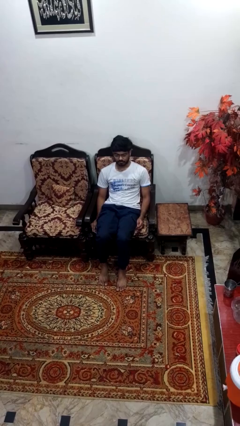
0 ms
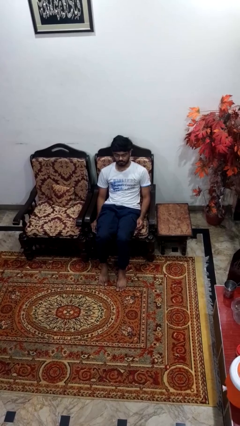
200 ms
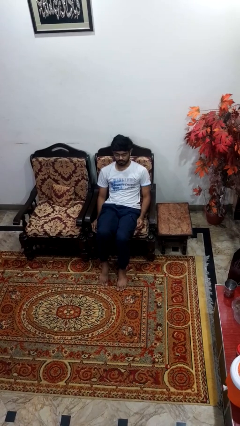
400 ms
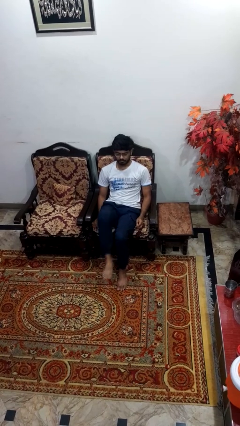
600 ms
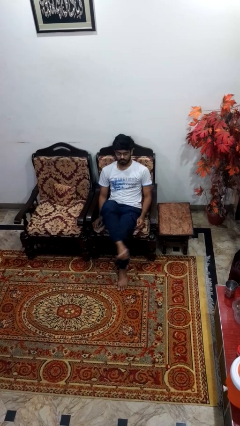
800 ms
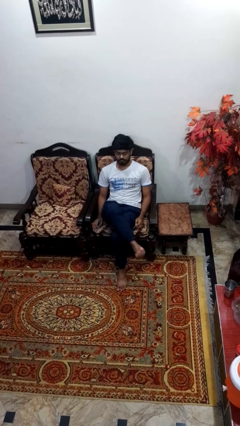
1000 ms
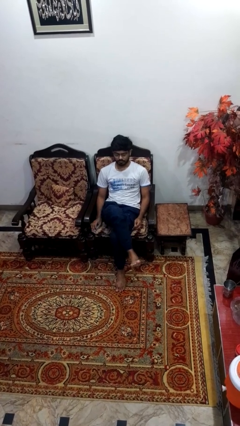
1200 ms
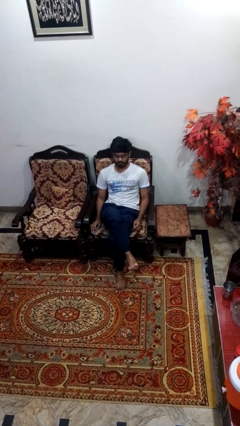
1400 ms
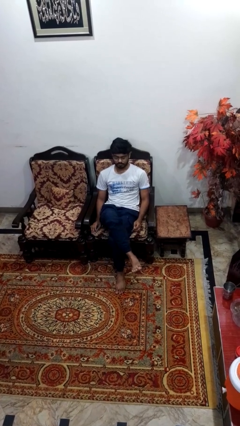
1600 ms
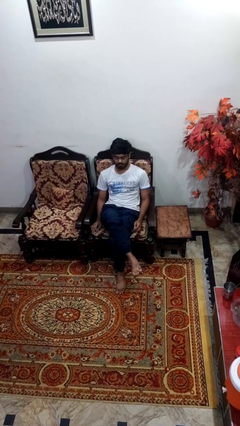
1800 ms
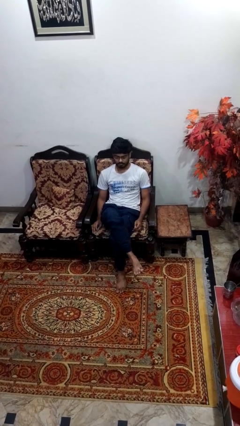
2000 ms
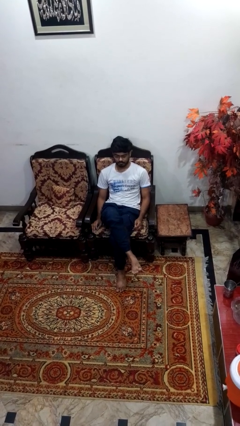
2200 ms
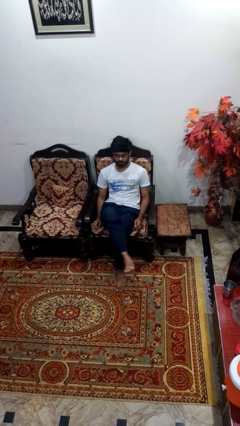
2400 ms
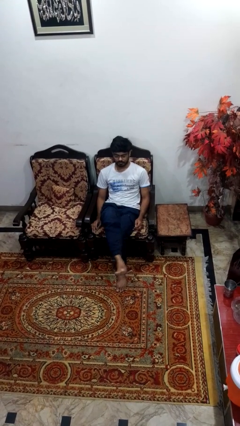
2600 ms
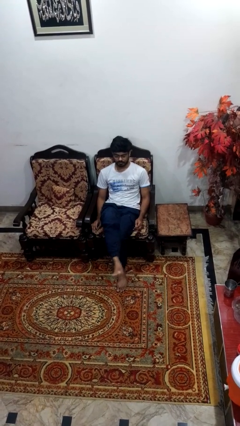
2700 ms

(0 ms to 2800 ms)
person crosses legs

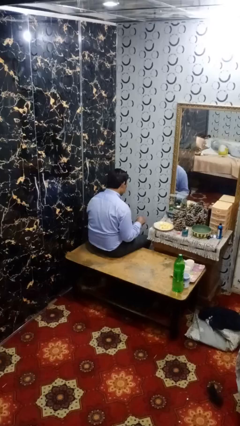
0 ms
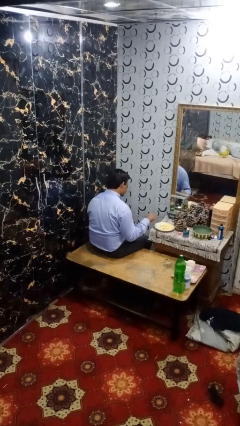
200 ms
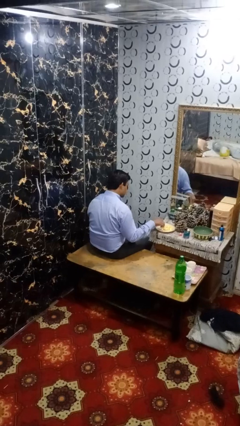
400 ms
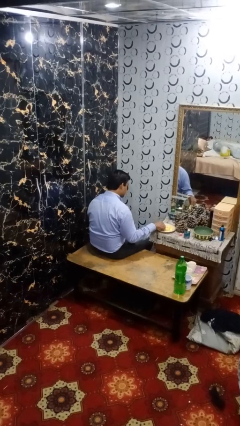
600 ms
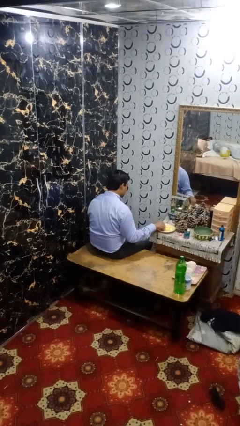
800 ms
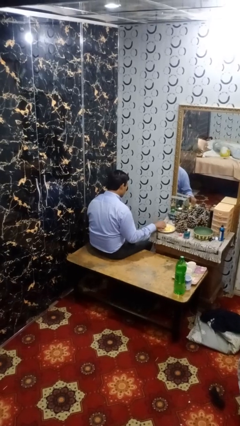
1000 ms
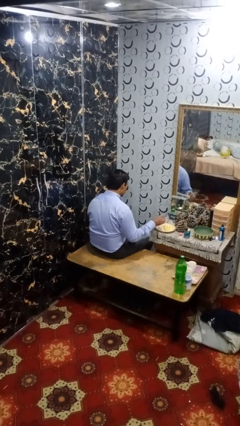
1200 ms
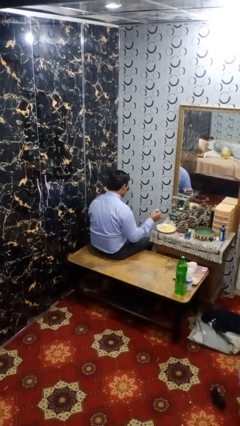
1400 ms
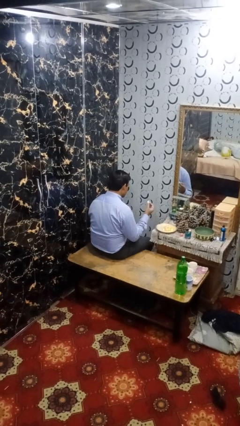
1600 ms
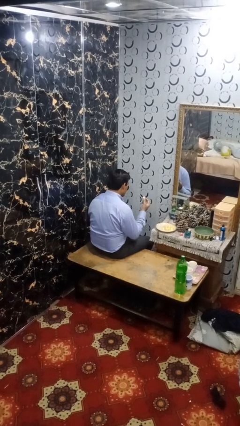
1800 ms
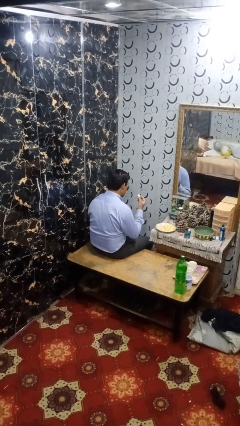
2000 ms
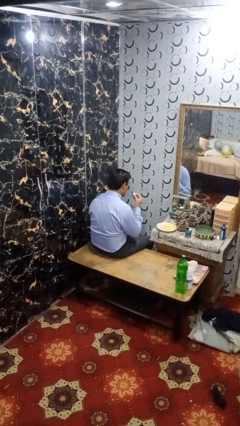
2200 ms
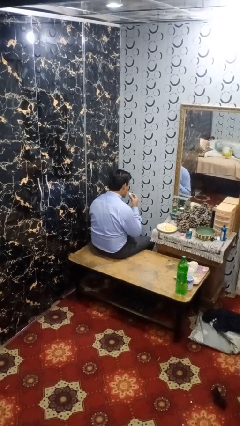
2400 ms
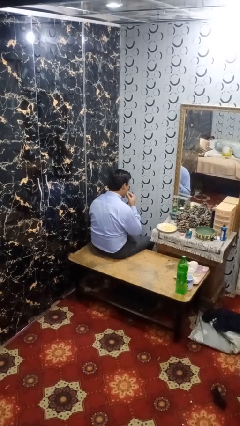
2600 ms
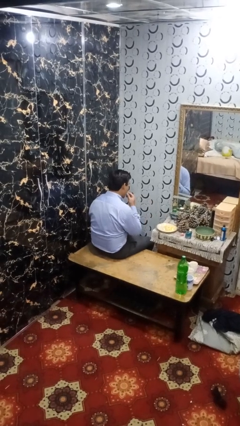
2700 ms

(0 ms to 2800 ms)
person eats with hands

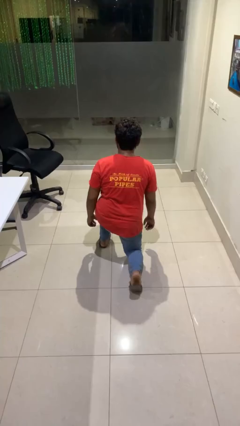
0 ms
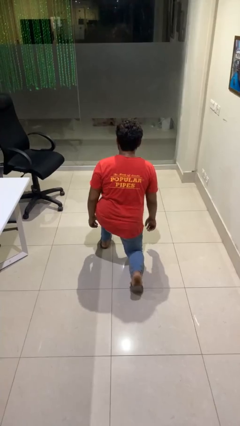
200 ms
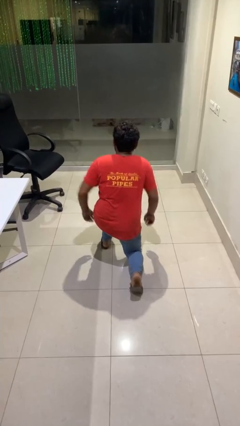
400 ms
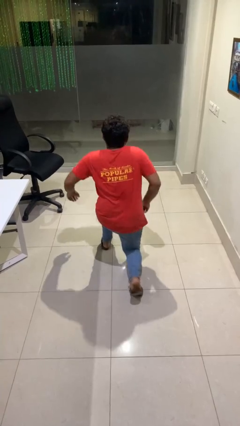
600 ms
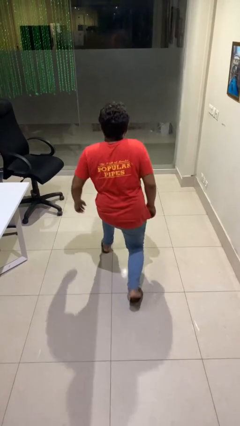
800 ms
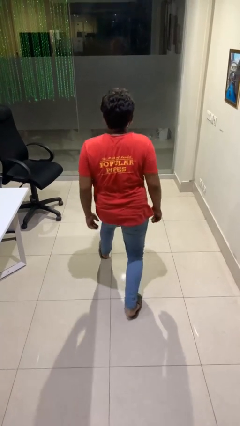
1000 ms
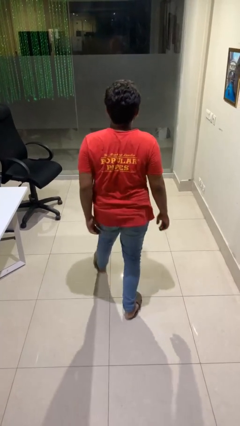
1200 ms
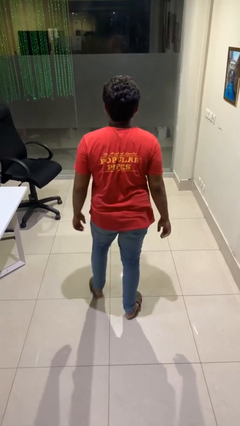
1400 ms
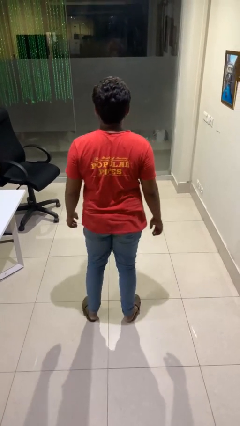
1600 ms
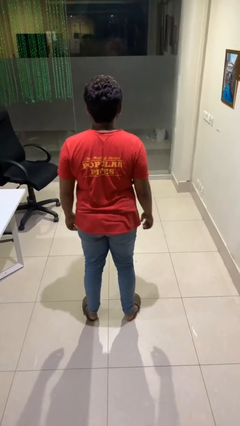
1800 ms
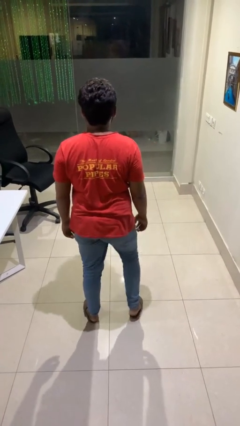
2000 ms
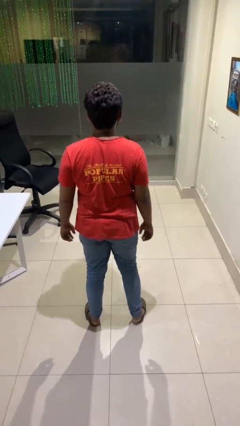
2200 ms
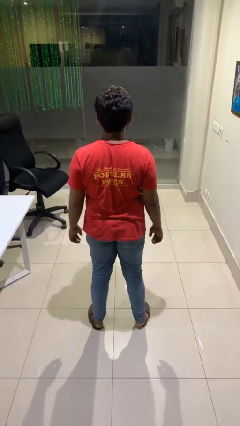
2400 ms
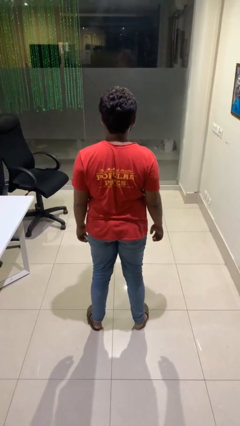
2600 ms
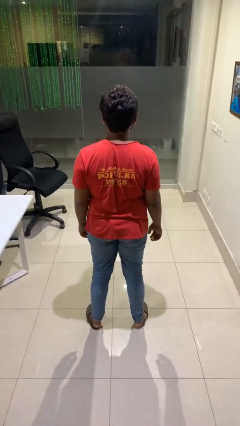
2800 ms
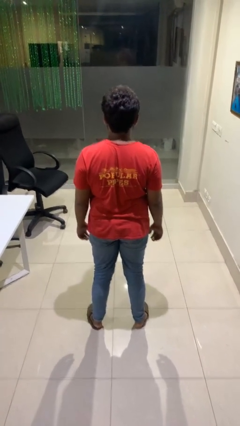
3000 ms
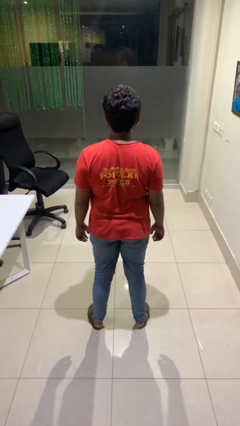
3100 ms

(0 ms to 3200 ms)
person stands up from floor

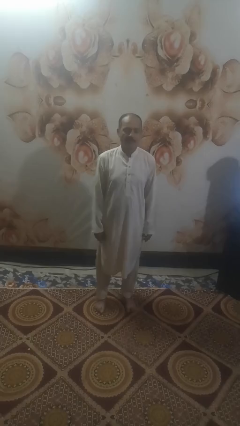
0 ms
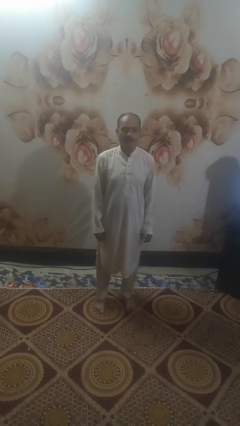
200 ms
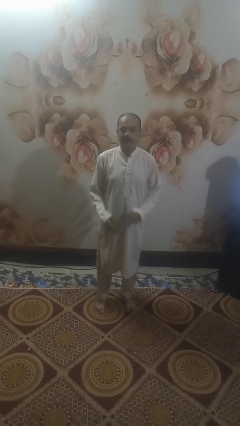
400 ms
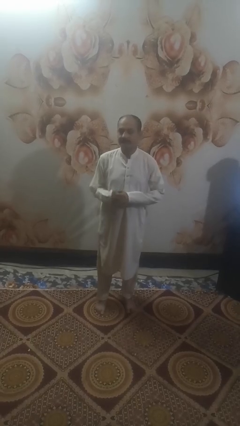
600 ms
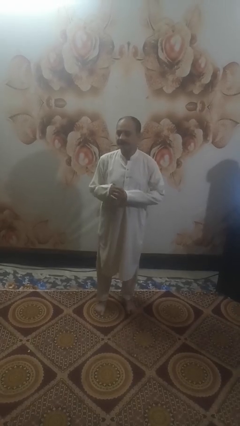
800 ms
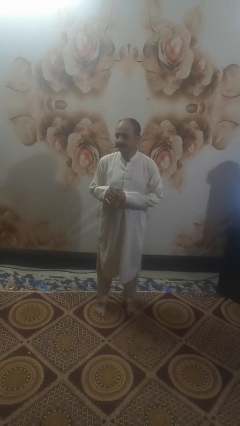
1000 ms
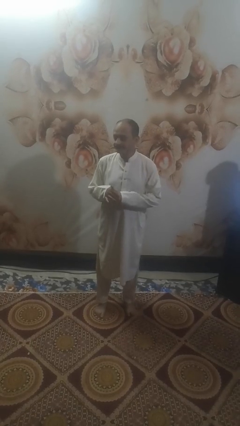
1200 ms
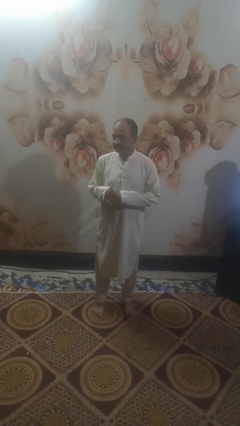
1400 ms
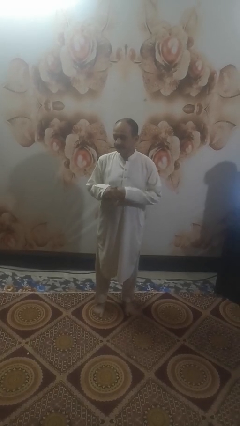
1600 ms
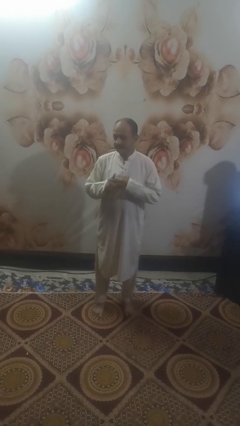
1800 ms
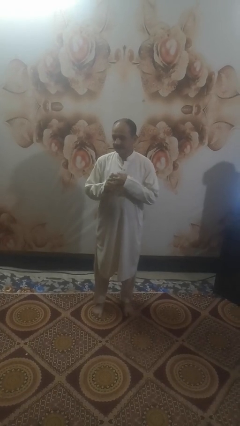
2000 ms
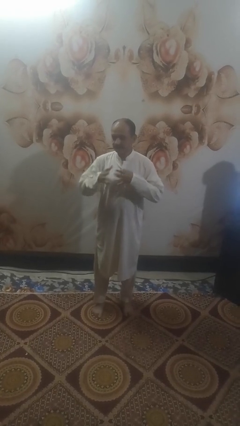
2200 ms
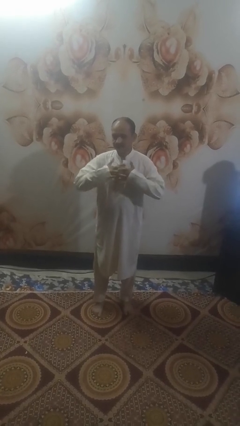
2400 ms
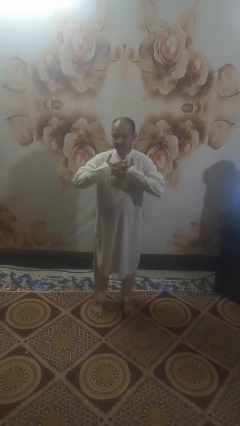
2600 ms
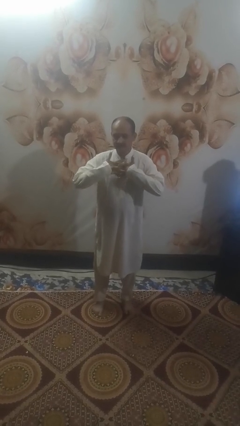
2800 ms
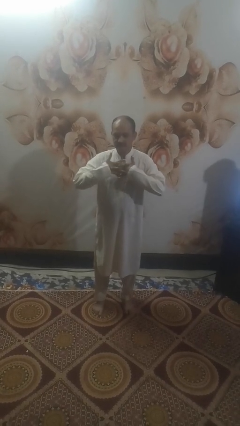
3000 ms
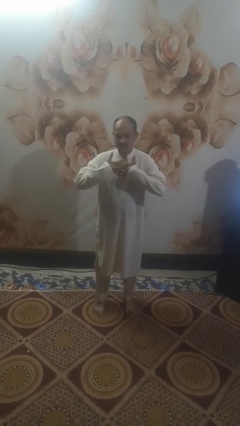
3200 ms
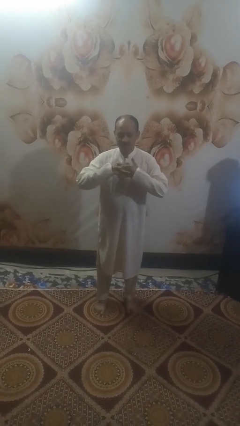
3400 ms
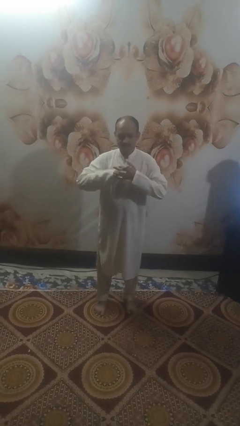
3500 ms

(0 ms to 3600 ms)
person cracks knuckles

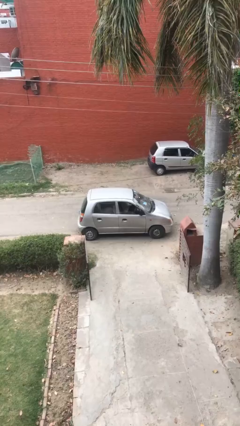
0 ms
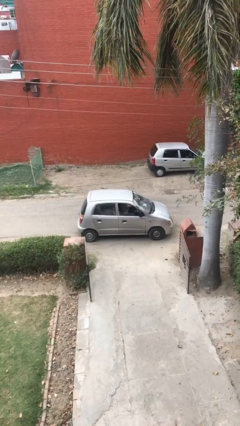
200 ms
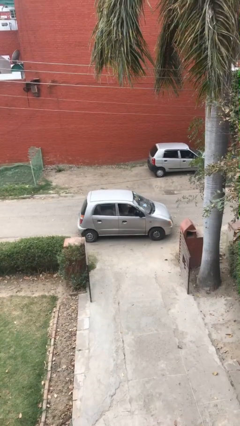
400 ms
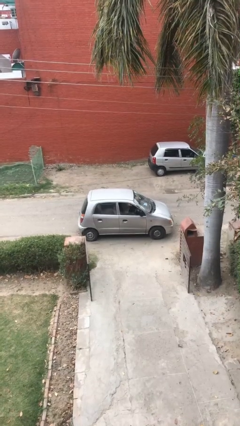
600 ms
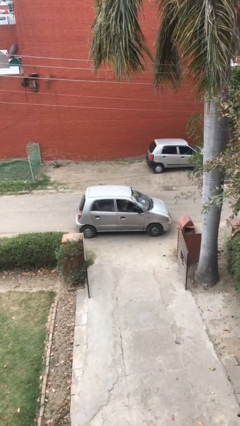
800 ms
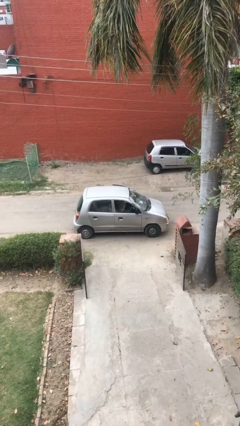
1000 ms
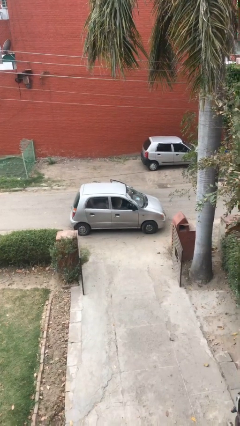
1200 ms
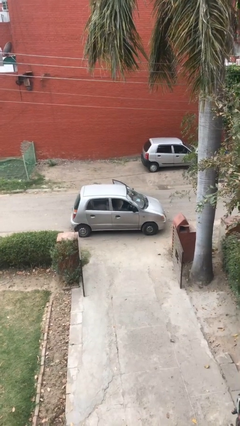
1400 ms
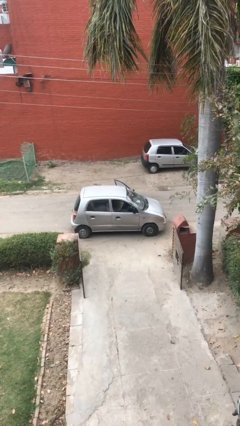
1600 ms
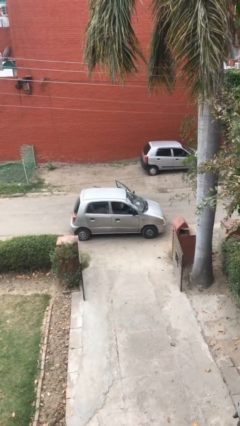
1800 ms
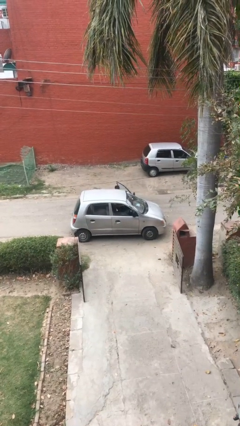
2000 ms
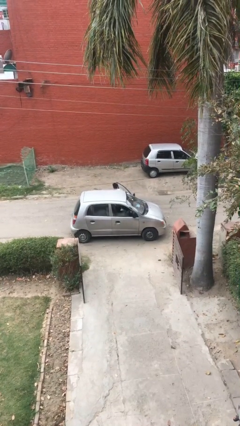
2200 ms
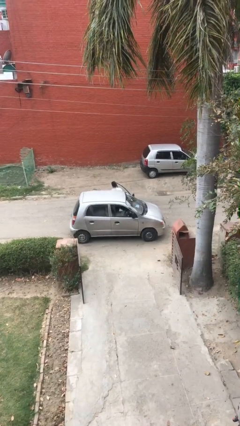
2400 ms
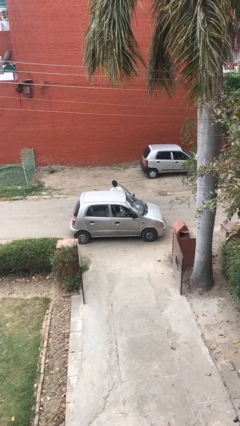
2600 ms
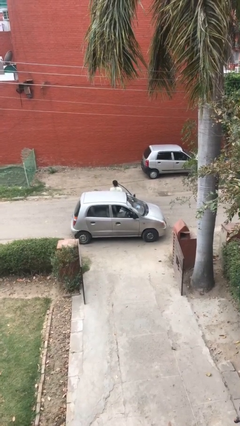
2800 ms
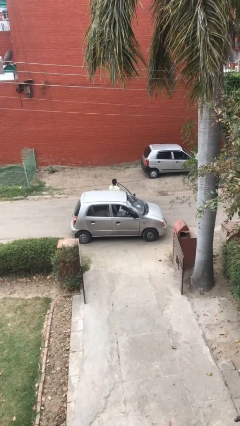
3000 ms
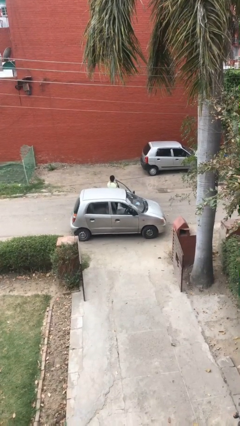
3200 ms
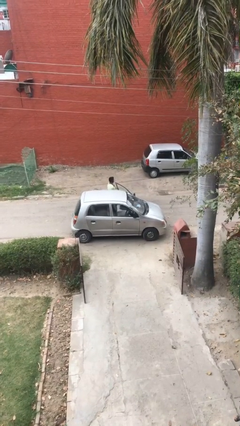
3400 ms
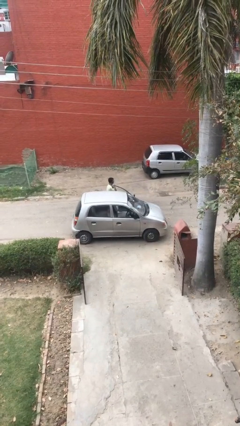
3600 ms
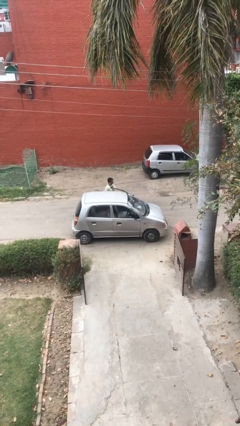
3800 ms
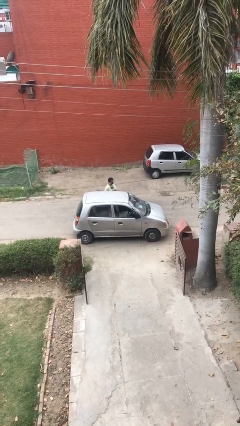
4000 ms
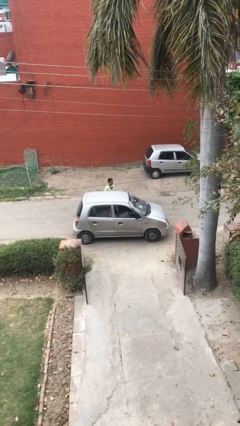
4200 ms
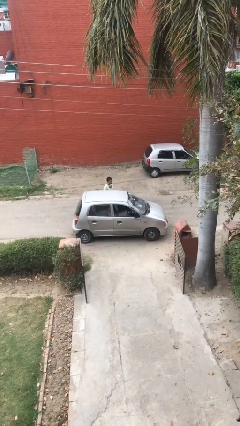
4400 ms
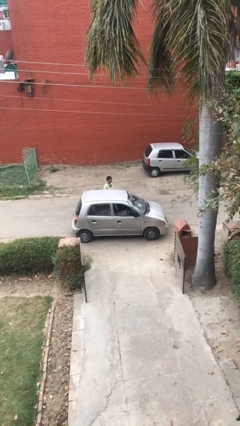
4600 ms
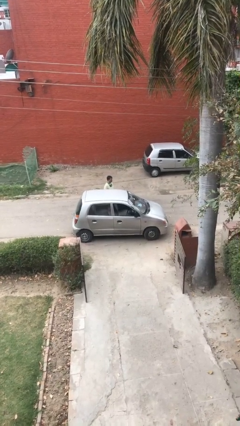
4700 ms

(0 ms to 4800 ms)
car drops off person

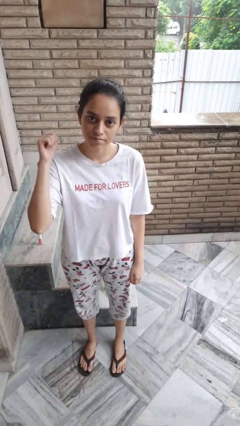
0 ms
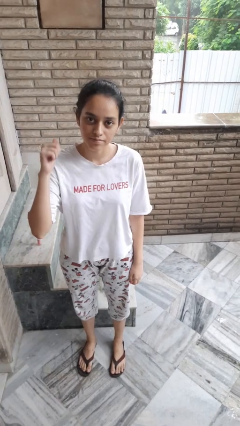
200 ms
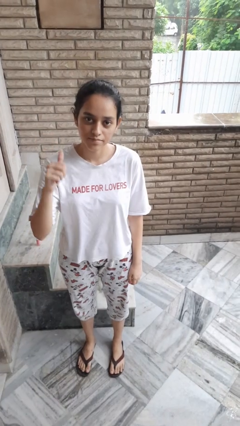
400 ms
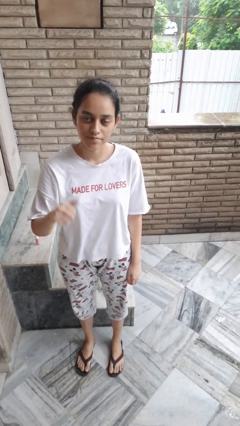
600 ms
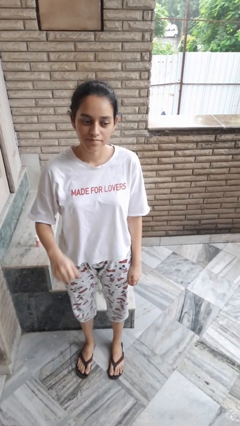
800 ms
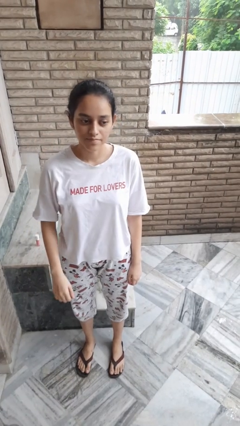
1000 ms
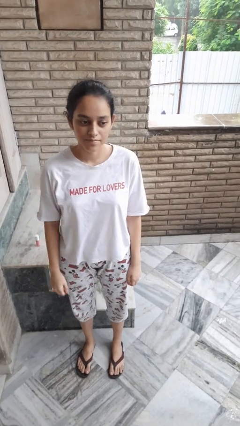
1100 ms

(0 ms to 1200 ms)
person gestures behind me
